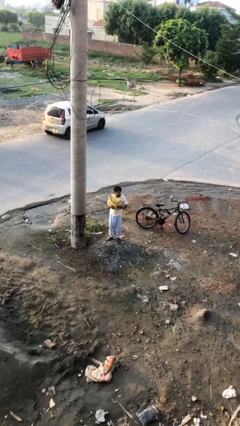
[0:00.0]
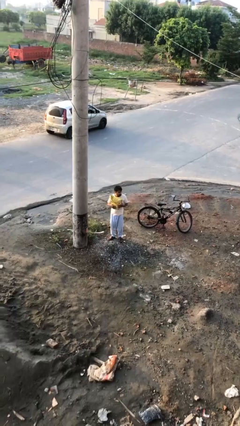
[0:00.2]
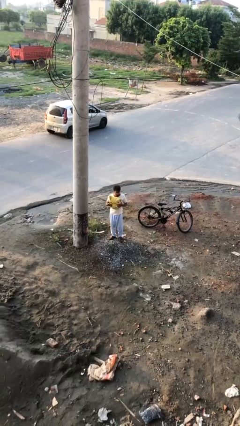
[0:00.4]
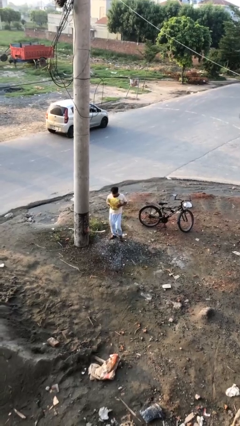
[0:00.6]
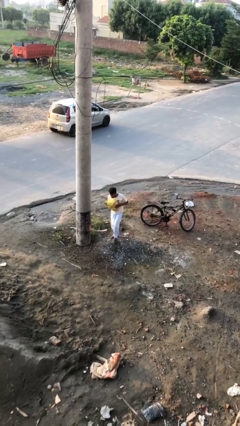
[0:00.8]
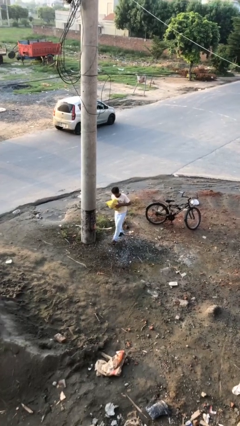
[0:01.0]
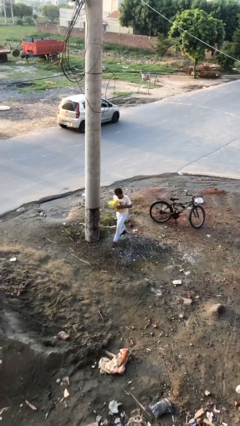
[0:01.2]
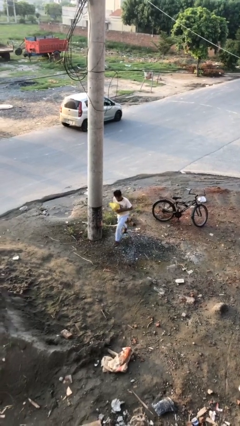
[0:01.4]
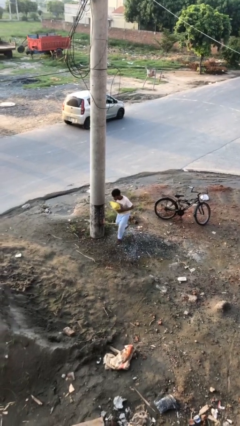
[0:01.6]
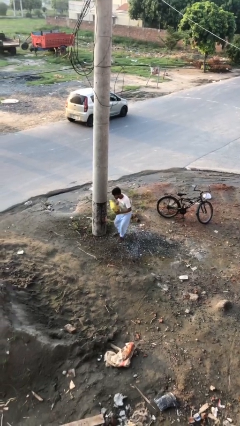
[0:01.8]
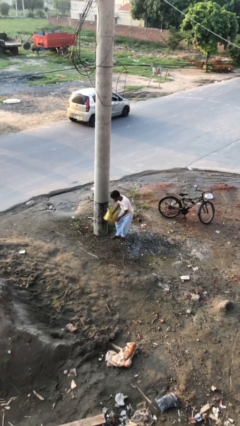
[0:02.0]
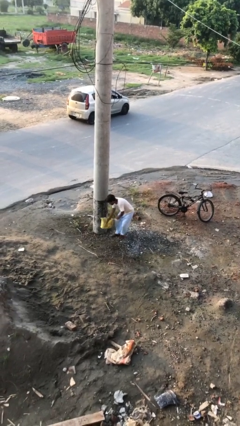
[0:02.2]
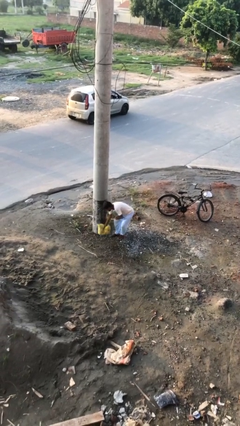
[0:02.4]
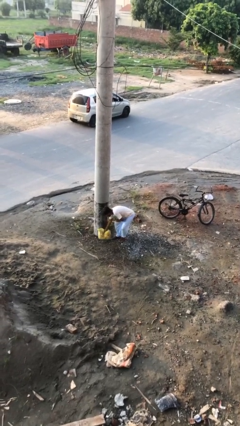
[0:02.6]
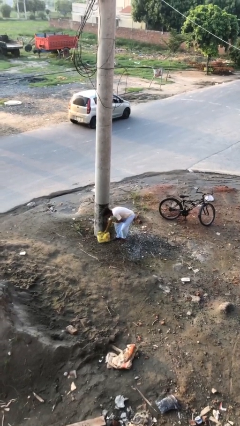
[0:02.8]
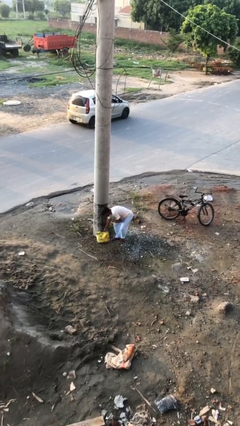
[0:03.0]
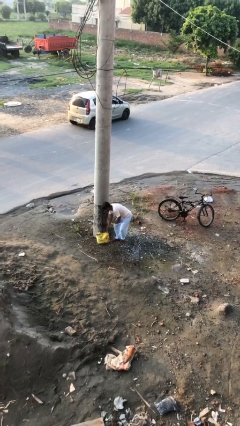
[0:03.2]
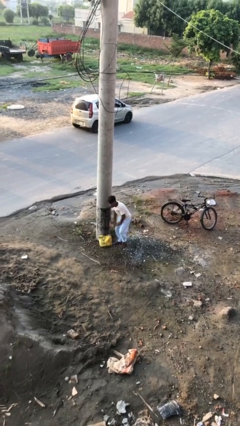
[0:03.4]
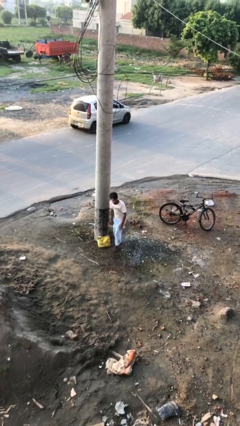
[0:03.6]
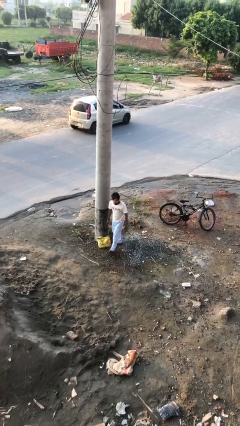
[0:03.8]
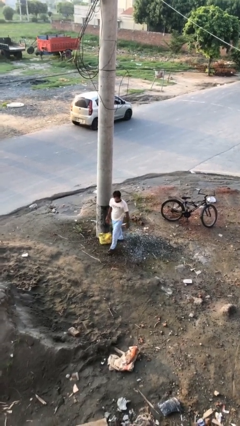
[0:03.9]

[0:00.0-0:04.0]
person puts down object on floor

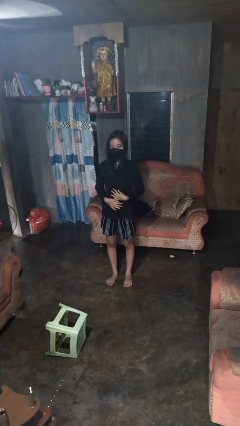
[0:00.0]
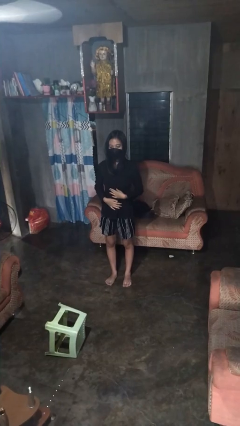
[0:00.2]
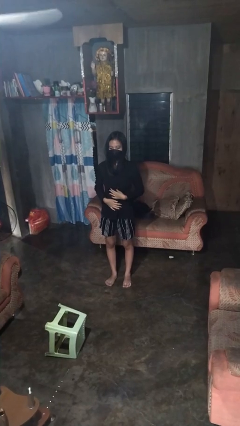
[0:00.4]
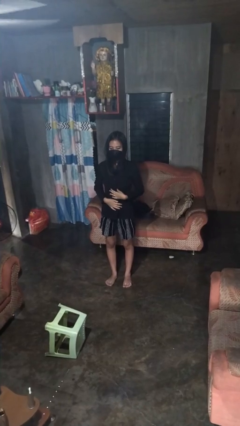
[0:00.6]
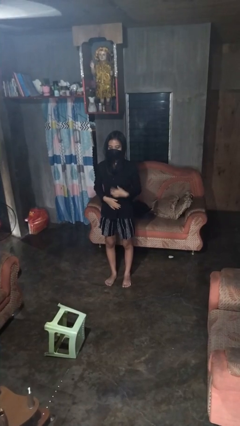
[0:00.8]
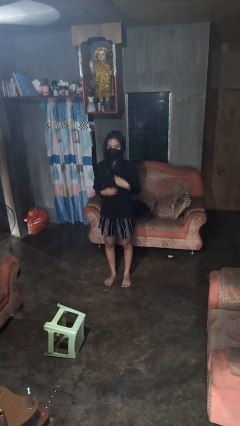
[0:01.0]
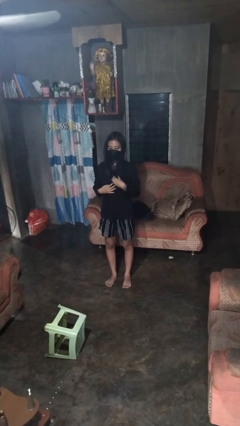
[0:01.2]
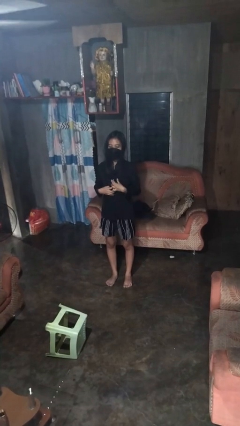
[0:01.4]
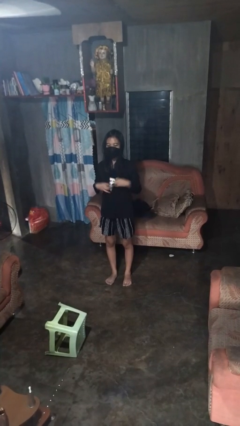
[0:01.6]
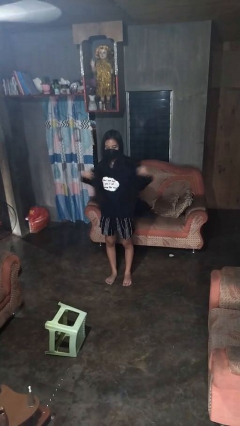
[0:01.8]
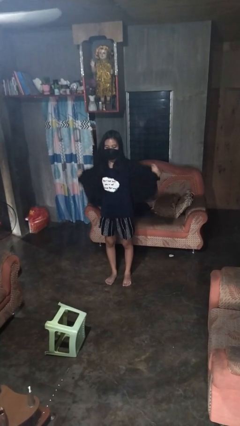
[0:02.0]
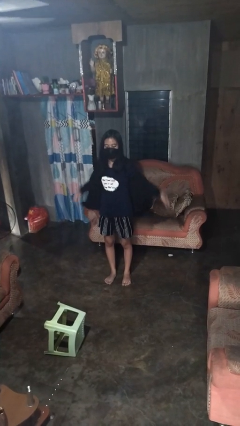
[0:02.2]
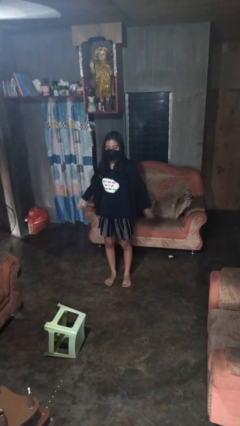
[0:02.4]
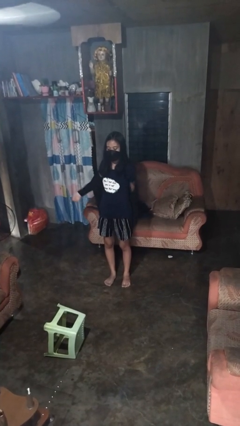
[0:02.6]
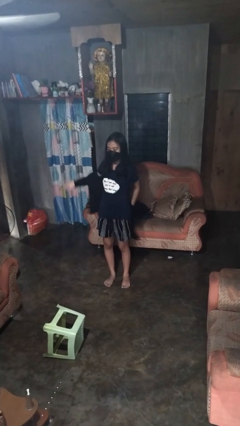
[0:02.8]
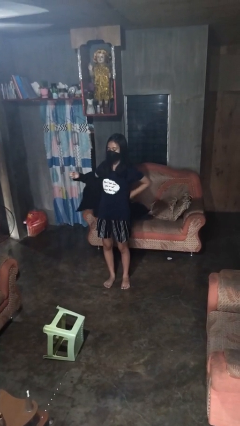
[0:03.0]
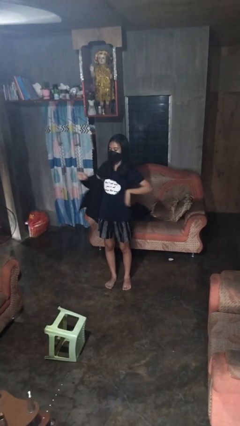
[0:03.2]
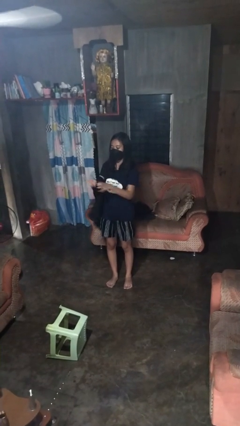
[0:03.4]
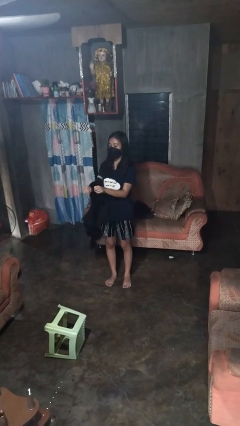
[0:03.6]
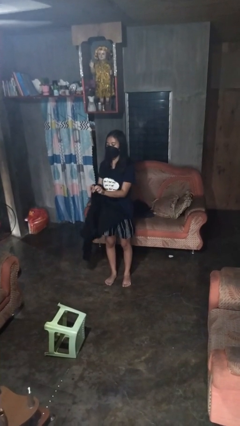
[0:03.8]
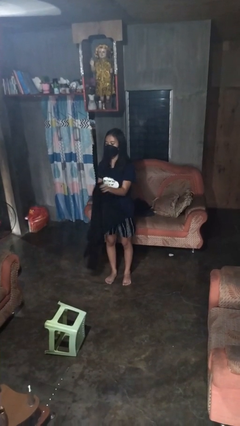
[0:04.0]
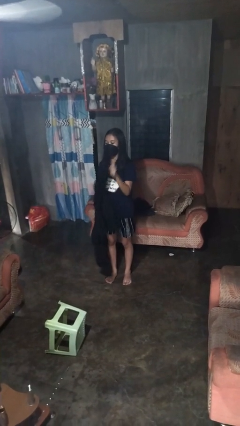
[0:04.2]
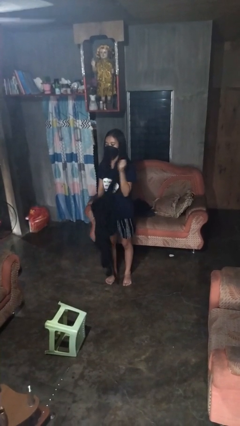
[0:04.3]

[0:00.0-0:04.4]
person takes off shirt

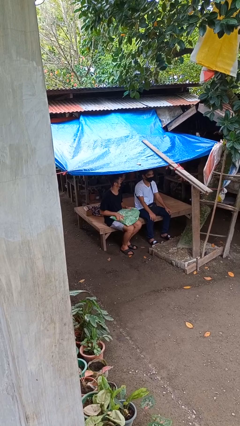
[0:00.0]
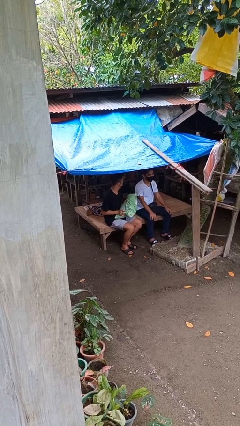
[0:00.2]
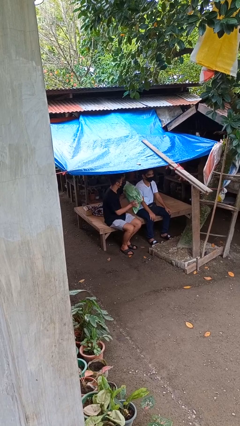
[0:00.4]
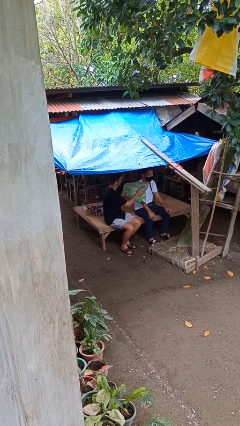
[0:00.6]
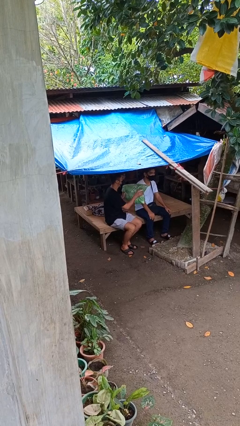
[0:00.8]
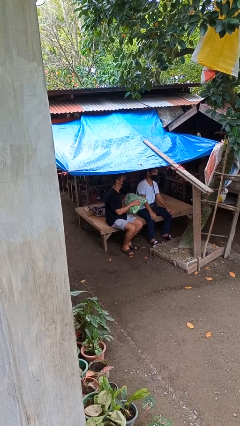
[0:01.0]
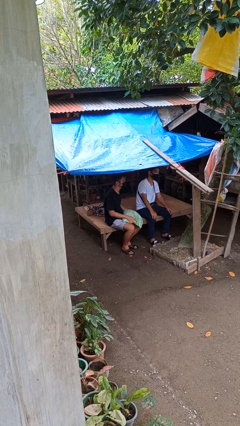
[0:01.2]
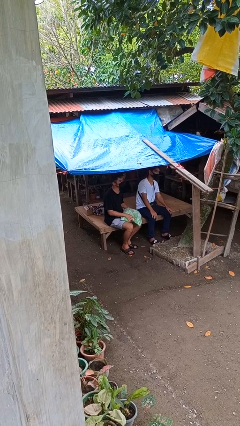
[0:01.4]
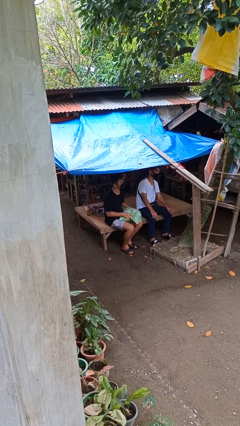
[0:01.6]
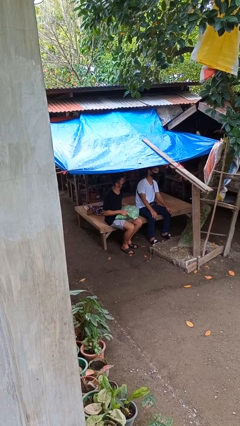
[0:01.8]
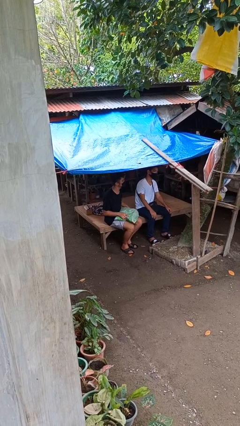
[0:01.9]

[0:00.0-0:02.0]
person hits person with pillow

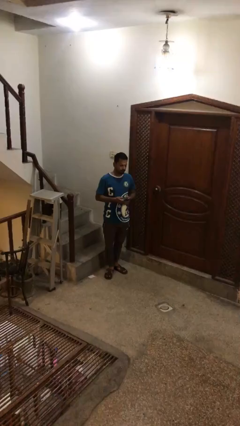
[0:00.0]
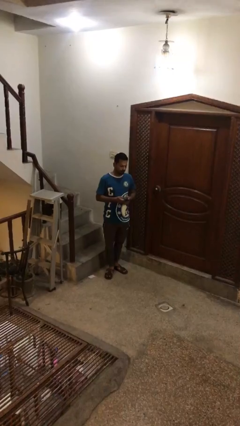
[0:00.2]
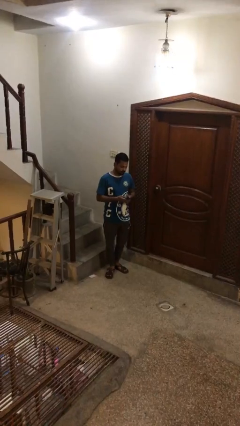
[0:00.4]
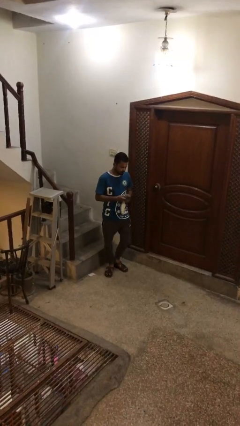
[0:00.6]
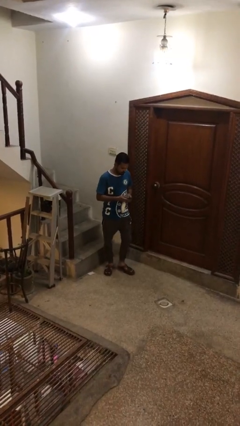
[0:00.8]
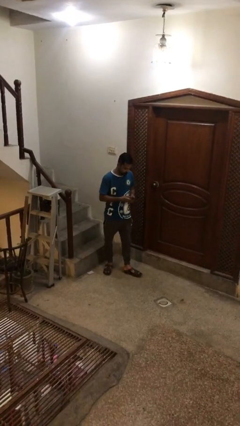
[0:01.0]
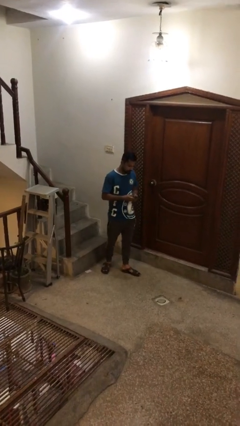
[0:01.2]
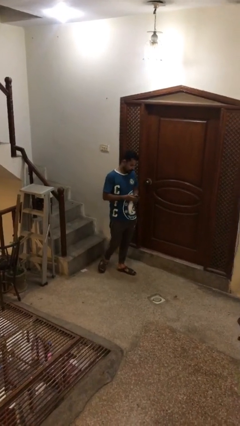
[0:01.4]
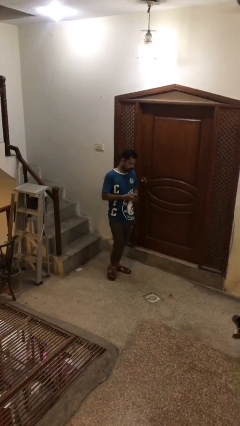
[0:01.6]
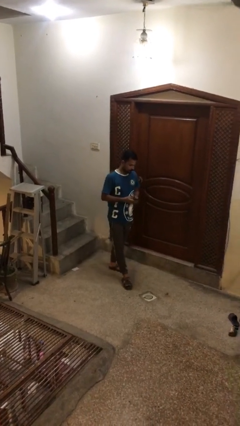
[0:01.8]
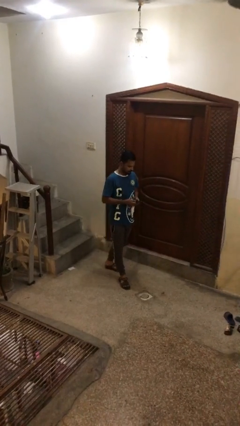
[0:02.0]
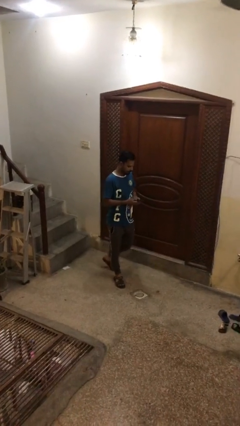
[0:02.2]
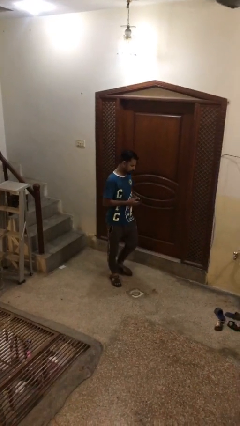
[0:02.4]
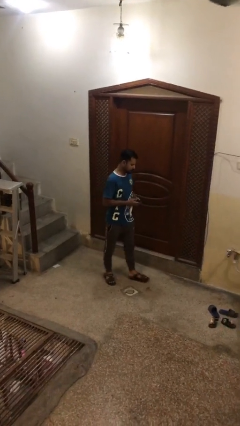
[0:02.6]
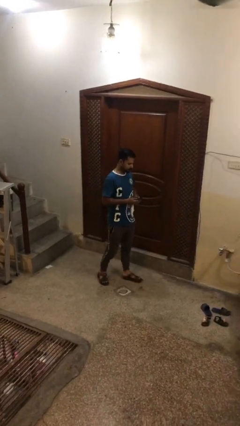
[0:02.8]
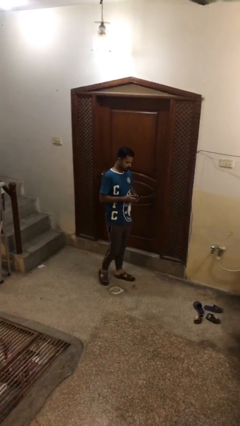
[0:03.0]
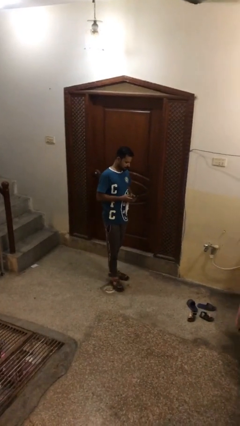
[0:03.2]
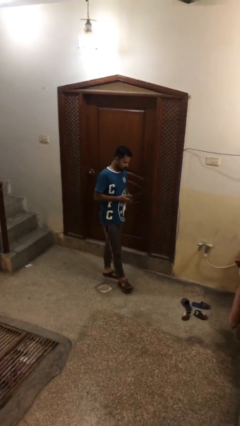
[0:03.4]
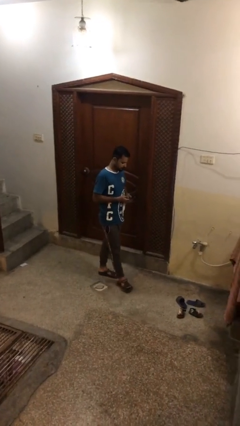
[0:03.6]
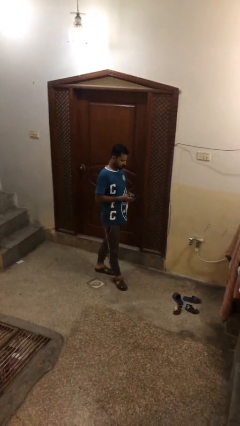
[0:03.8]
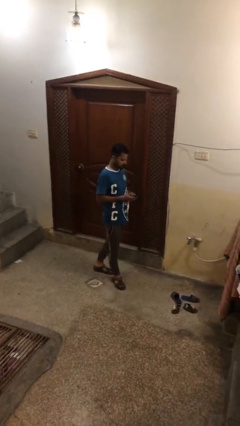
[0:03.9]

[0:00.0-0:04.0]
person texts on phone

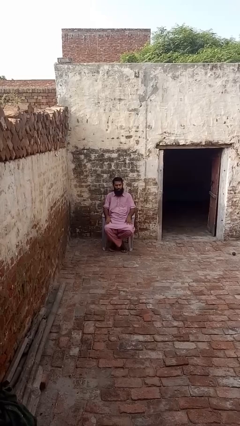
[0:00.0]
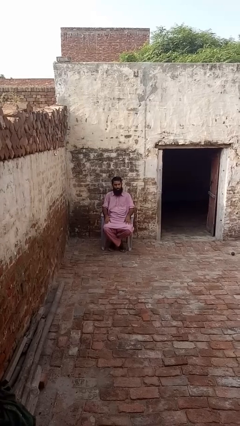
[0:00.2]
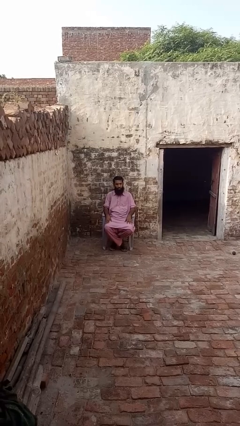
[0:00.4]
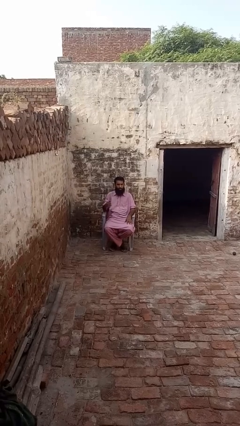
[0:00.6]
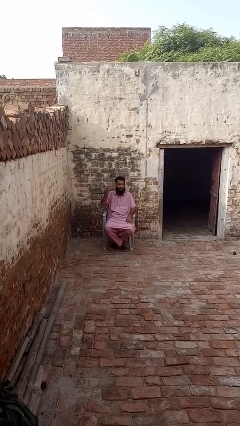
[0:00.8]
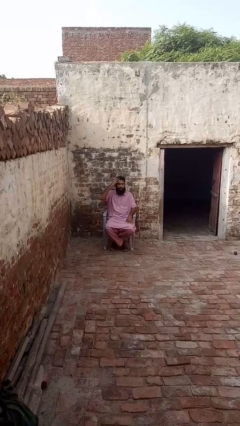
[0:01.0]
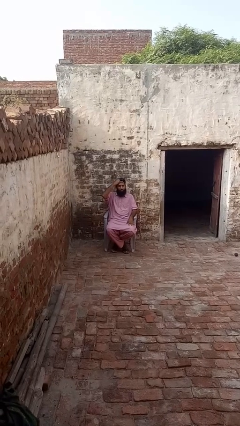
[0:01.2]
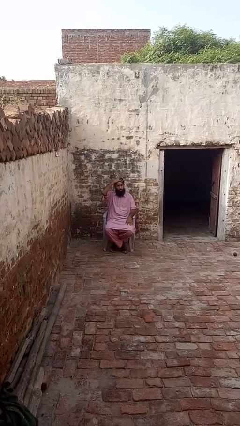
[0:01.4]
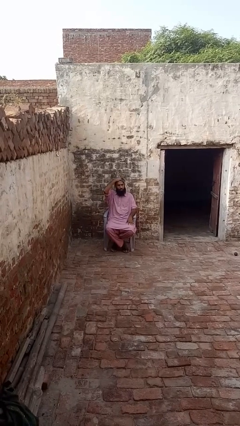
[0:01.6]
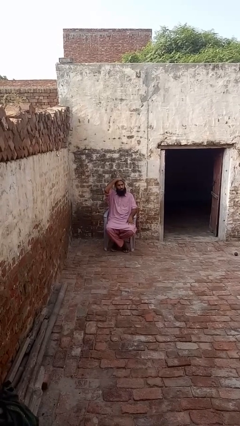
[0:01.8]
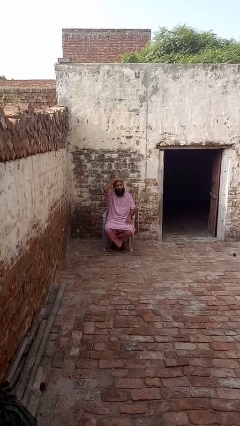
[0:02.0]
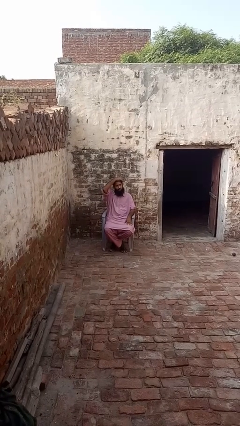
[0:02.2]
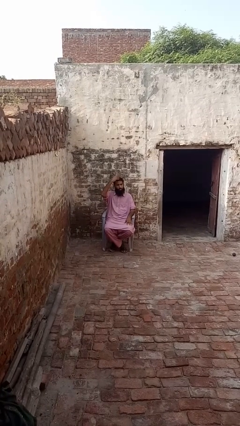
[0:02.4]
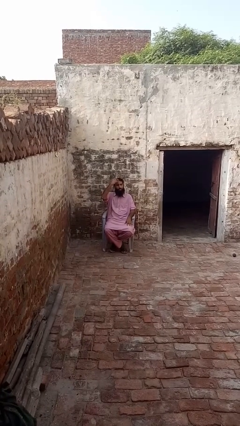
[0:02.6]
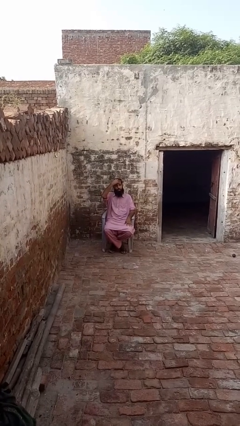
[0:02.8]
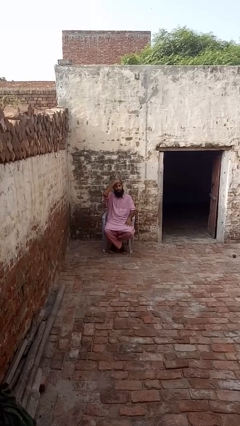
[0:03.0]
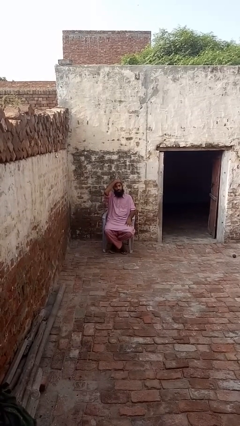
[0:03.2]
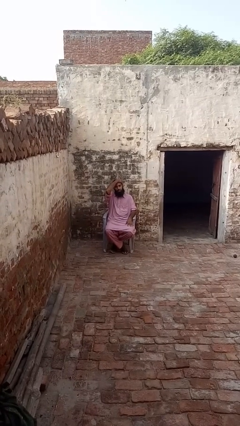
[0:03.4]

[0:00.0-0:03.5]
person strokes hair
